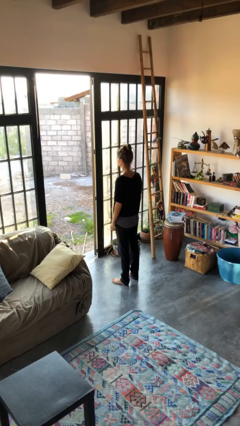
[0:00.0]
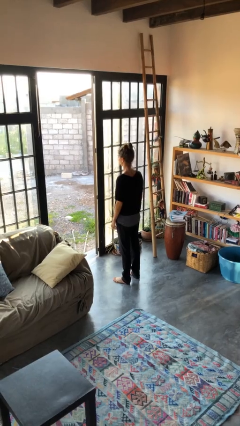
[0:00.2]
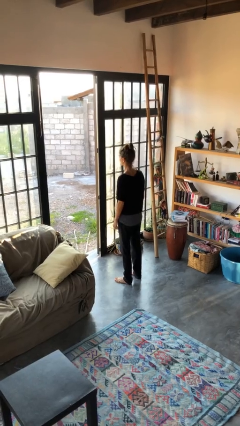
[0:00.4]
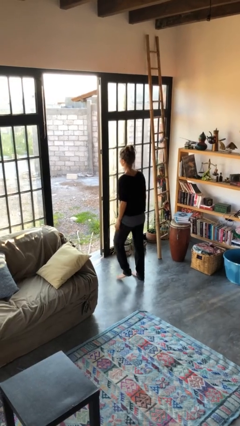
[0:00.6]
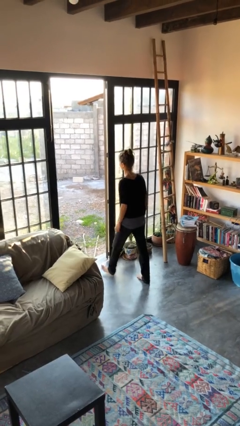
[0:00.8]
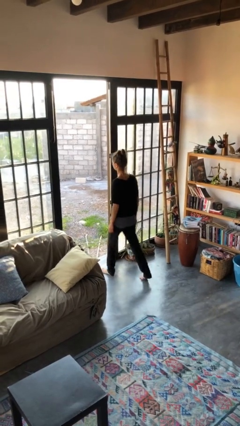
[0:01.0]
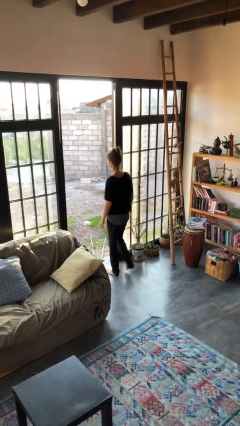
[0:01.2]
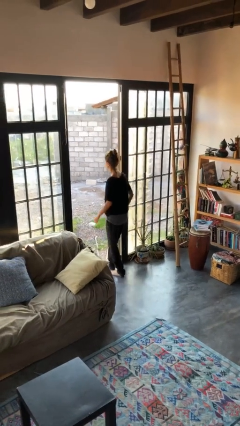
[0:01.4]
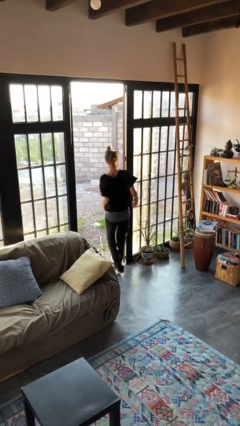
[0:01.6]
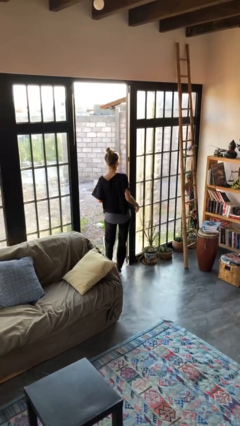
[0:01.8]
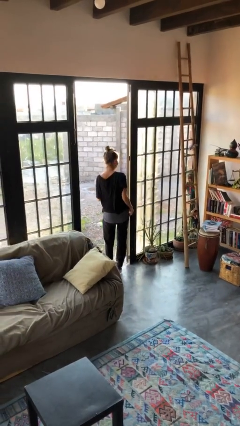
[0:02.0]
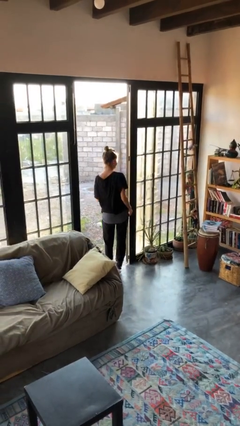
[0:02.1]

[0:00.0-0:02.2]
person bumps into wall

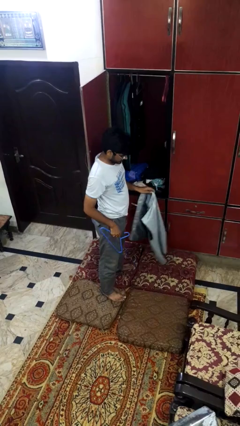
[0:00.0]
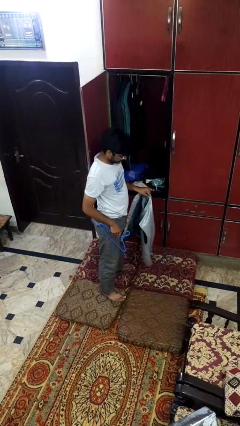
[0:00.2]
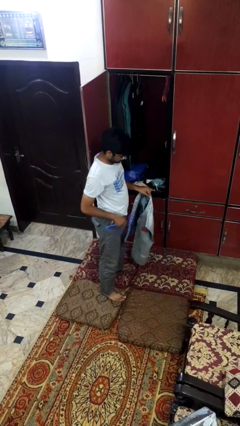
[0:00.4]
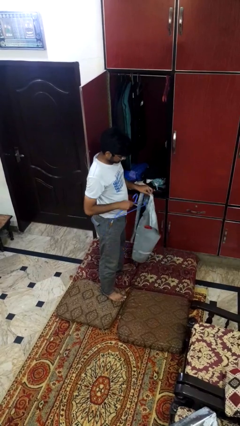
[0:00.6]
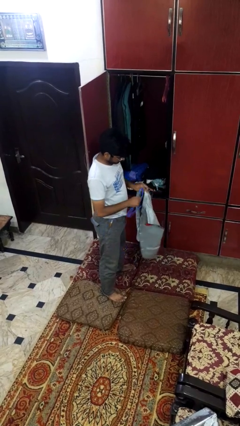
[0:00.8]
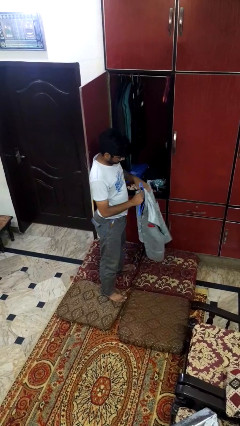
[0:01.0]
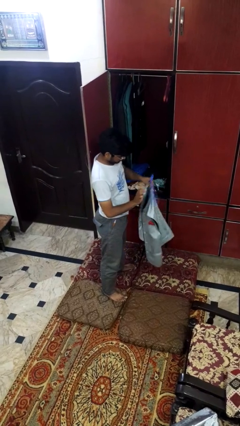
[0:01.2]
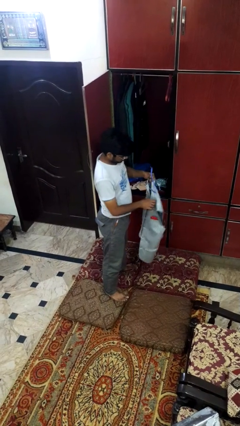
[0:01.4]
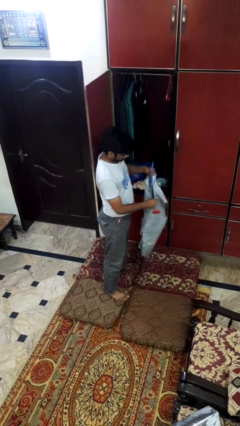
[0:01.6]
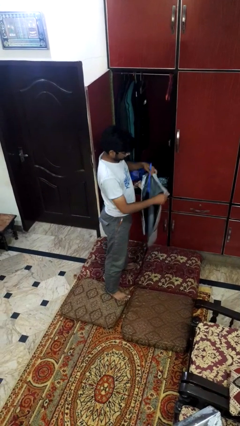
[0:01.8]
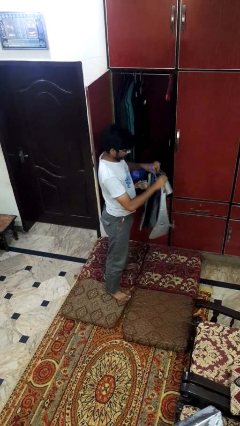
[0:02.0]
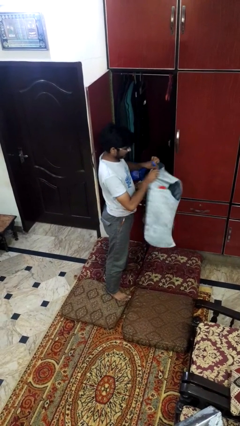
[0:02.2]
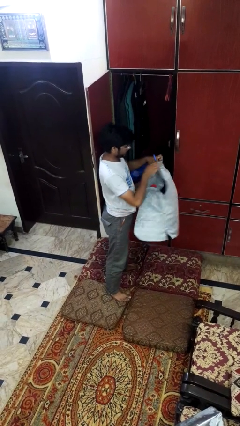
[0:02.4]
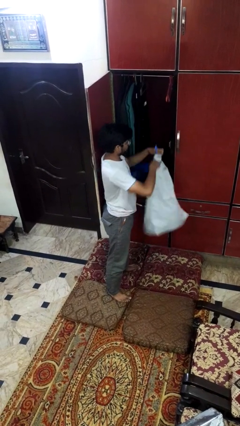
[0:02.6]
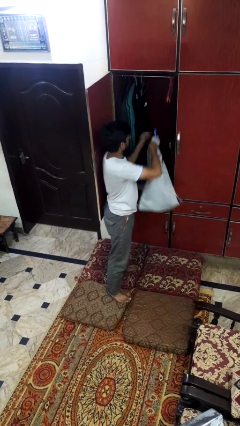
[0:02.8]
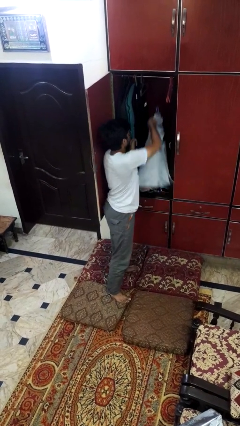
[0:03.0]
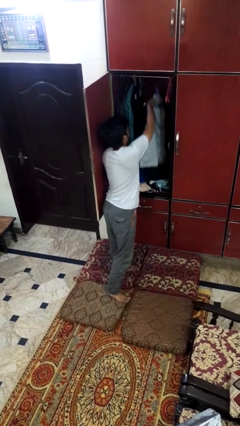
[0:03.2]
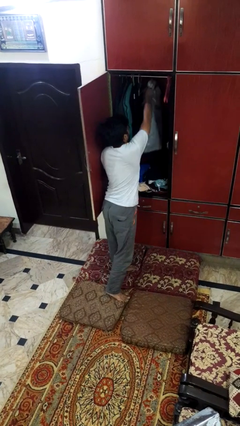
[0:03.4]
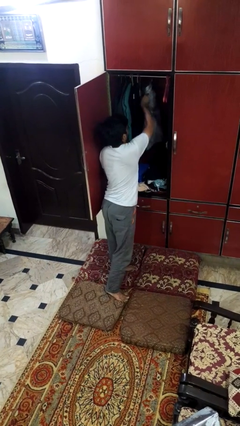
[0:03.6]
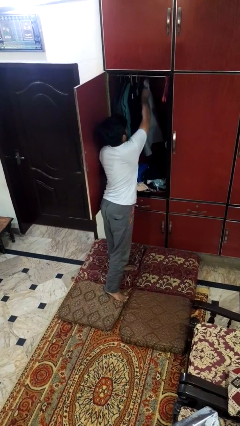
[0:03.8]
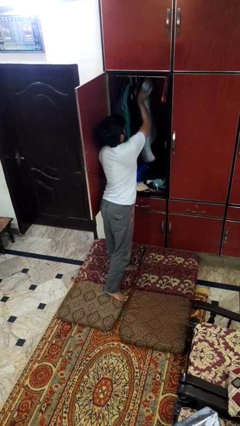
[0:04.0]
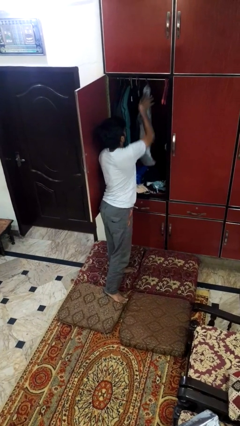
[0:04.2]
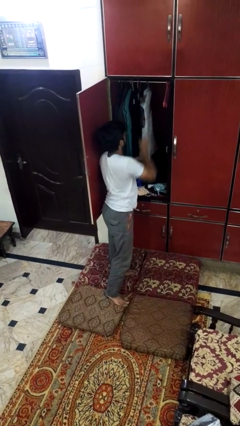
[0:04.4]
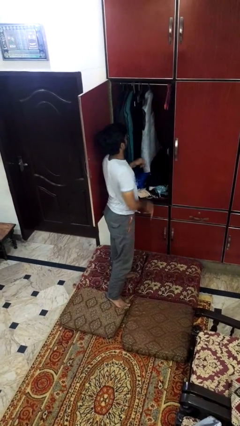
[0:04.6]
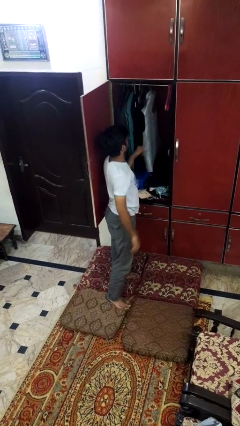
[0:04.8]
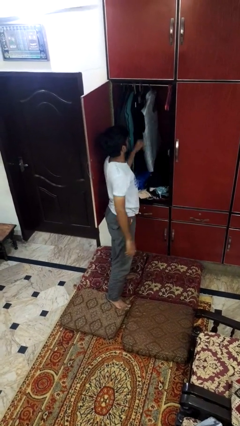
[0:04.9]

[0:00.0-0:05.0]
person puts clothes into closet

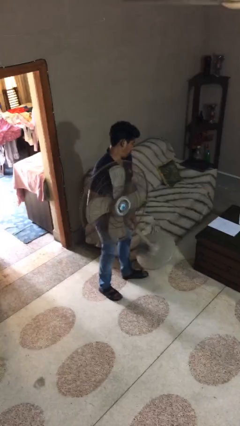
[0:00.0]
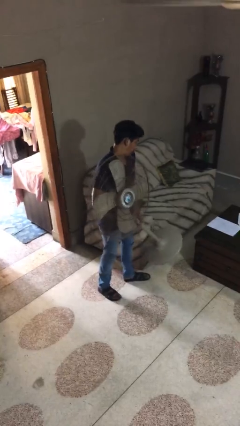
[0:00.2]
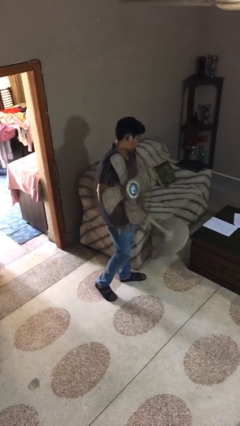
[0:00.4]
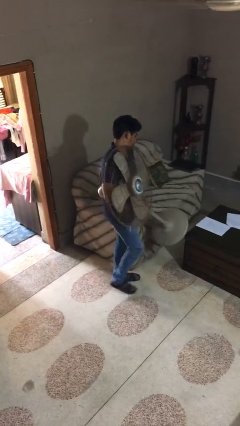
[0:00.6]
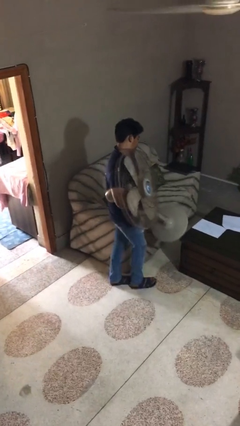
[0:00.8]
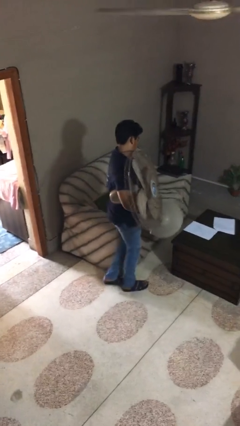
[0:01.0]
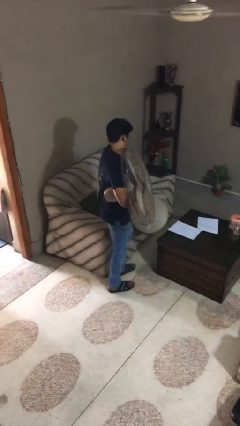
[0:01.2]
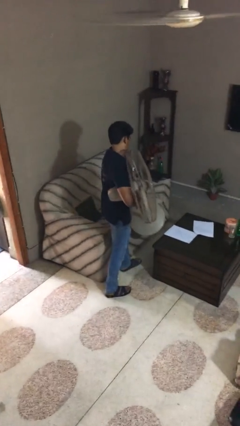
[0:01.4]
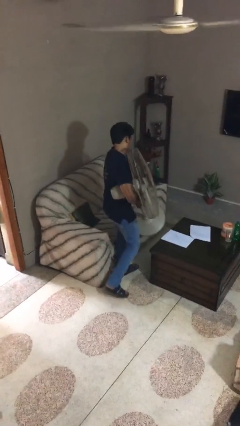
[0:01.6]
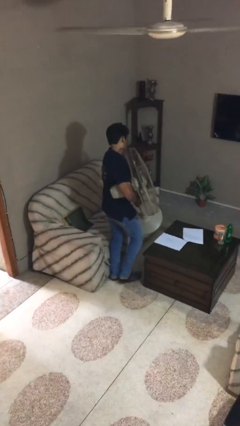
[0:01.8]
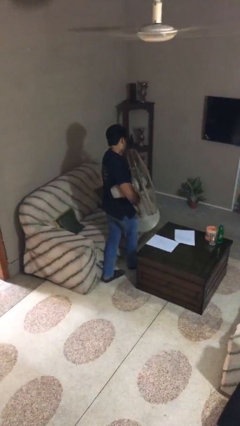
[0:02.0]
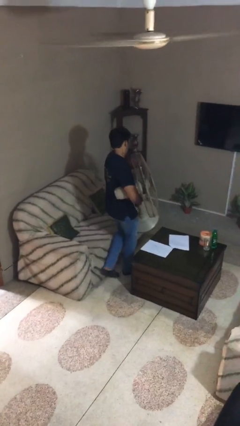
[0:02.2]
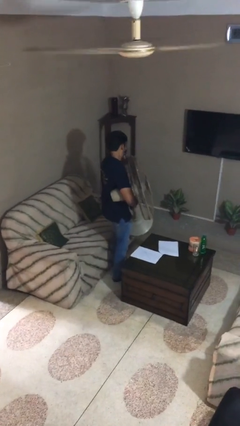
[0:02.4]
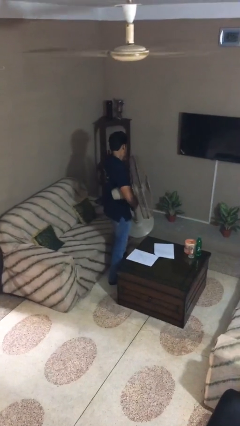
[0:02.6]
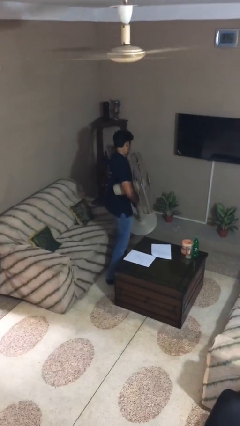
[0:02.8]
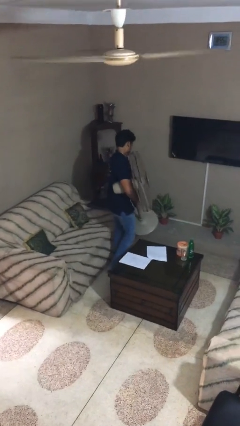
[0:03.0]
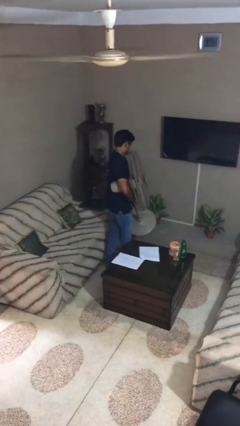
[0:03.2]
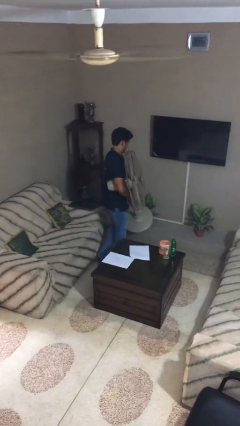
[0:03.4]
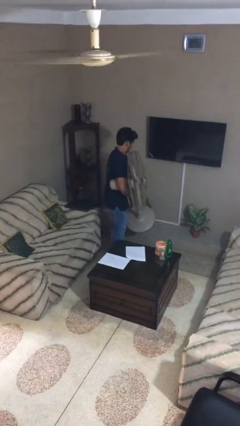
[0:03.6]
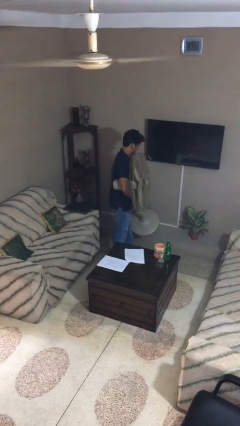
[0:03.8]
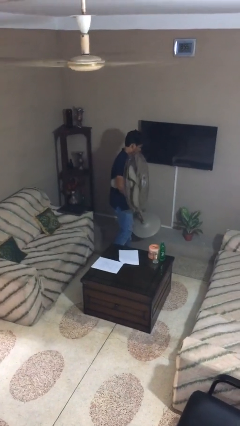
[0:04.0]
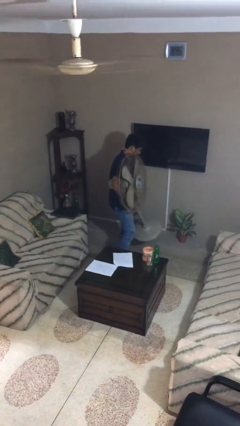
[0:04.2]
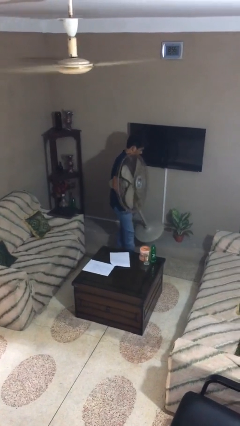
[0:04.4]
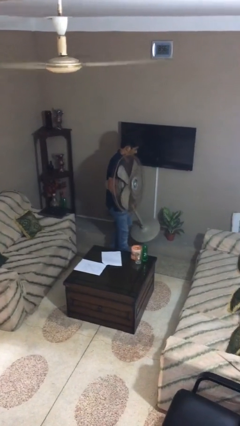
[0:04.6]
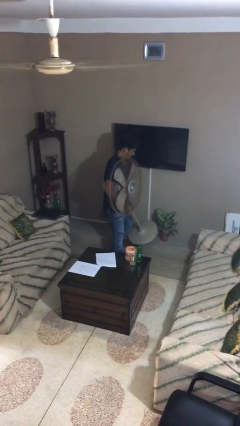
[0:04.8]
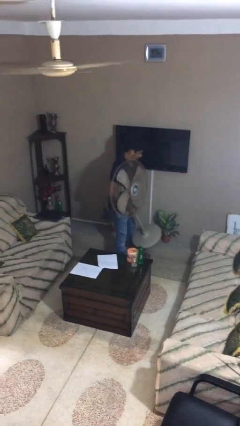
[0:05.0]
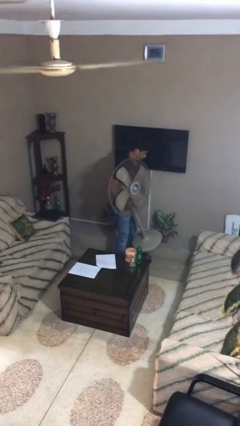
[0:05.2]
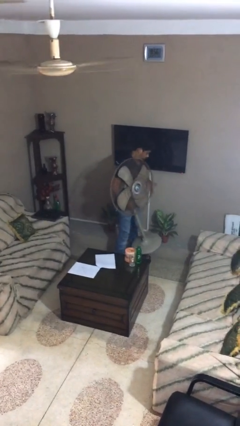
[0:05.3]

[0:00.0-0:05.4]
person carries heavy object

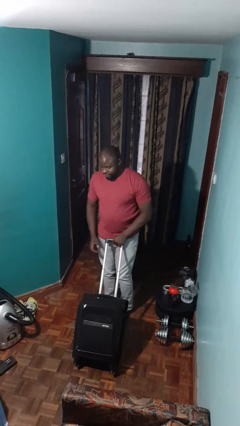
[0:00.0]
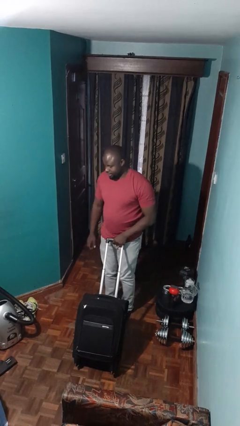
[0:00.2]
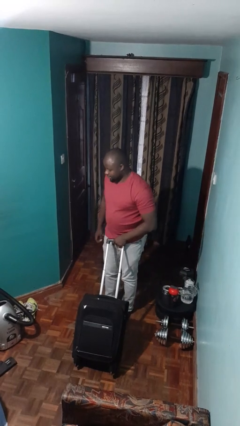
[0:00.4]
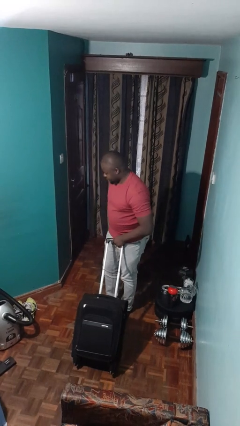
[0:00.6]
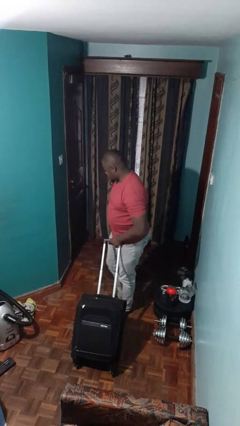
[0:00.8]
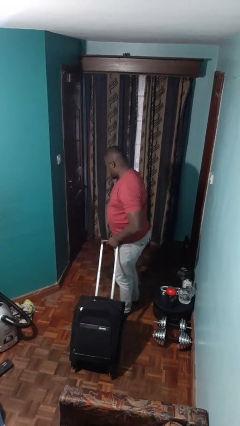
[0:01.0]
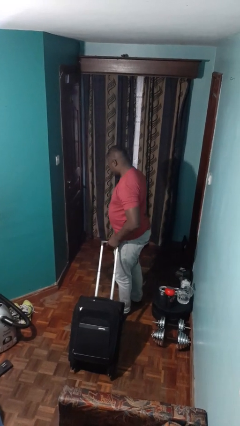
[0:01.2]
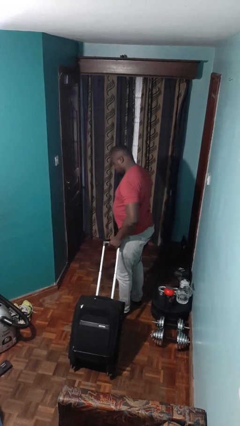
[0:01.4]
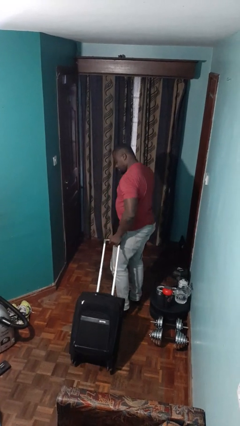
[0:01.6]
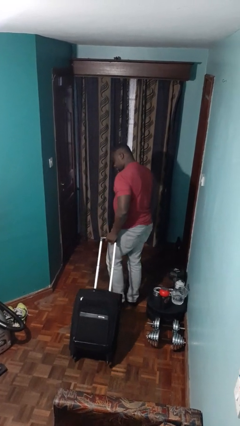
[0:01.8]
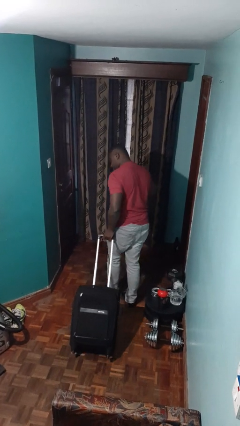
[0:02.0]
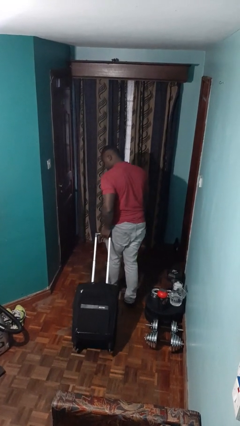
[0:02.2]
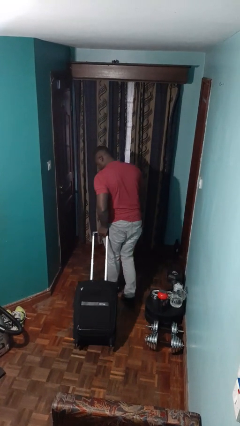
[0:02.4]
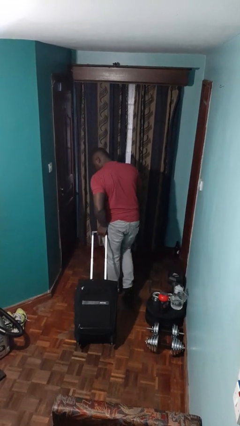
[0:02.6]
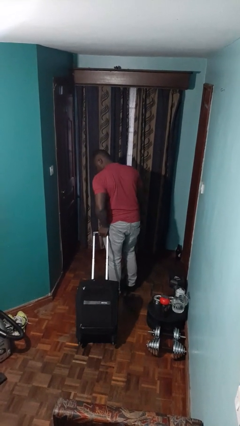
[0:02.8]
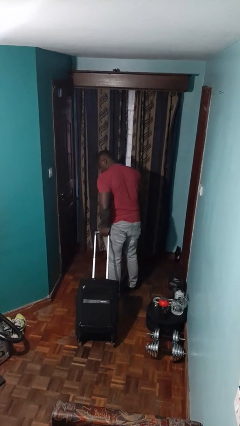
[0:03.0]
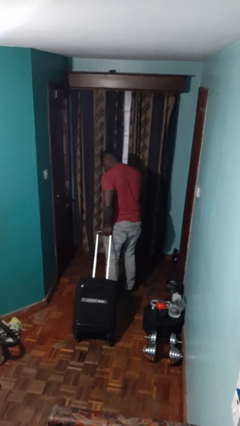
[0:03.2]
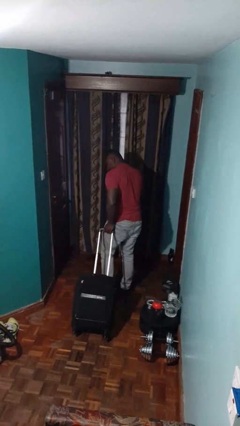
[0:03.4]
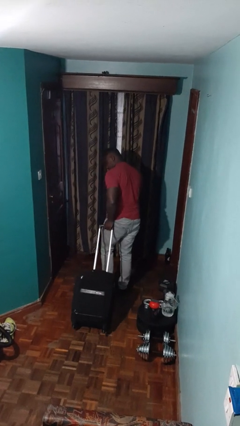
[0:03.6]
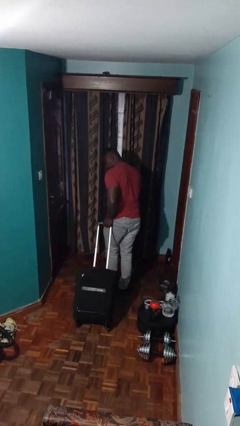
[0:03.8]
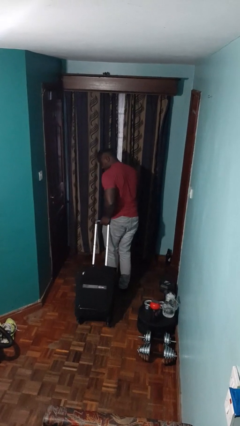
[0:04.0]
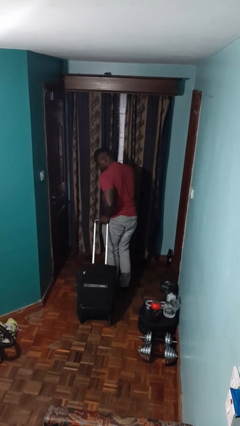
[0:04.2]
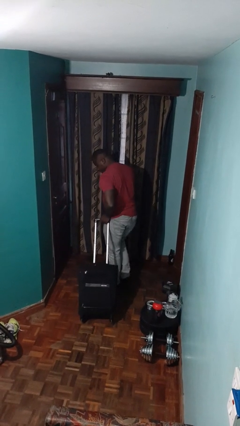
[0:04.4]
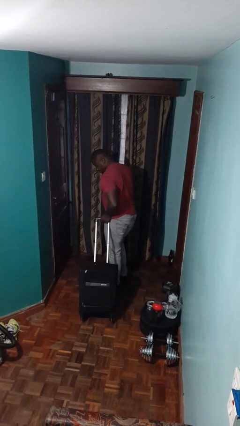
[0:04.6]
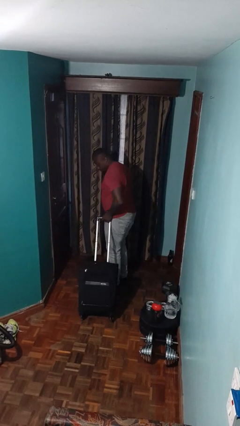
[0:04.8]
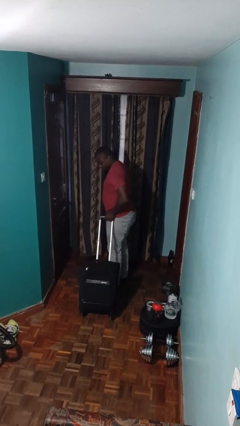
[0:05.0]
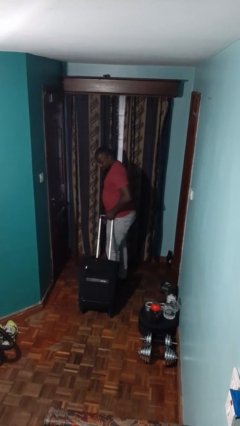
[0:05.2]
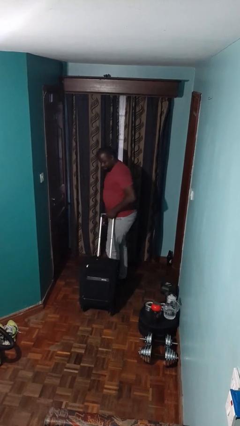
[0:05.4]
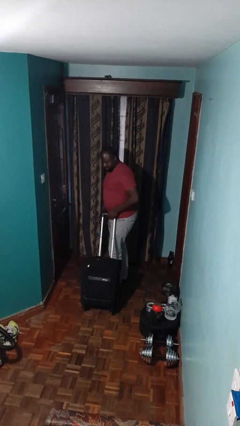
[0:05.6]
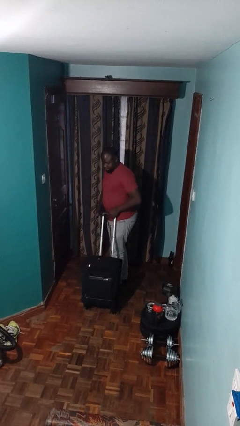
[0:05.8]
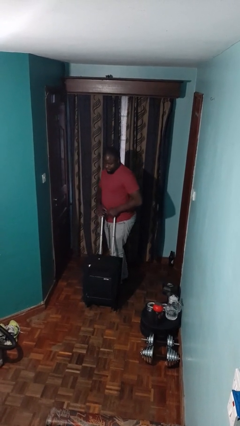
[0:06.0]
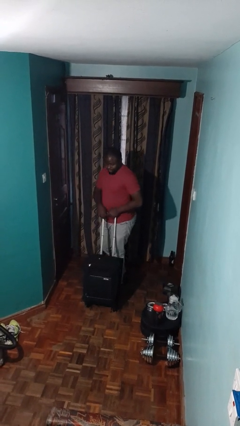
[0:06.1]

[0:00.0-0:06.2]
person pulls wheeled cart
